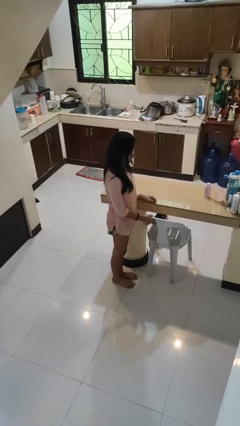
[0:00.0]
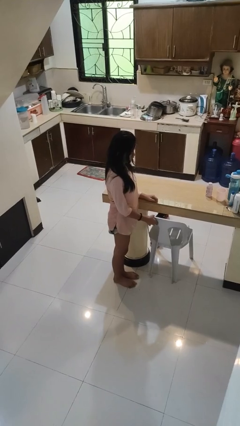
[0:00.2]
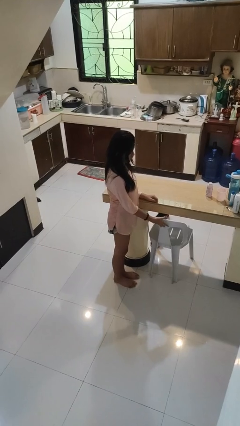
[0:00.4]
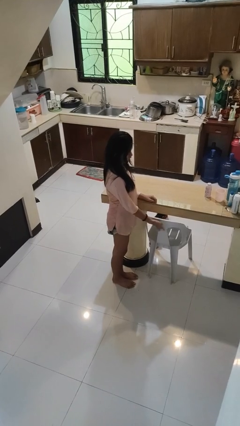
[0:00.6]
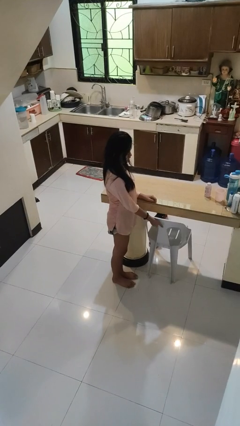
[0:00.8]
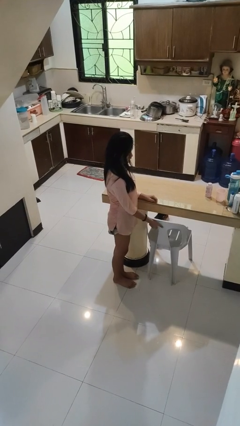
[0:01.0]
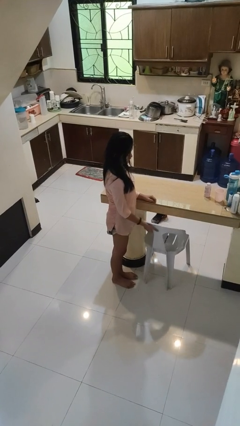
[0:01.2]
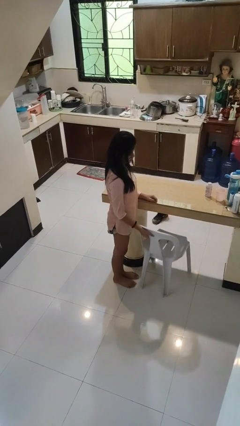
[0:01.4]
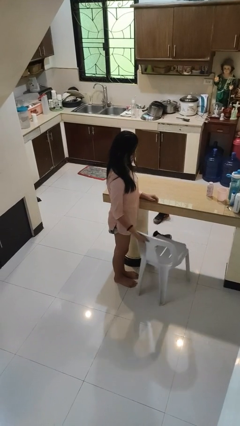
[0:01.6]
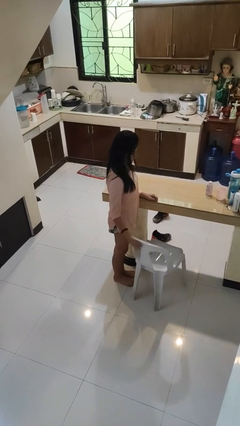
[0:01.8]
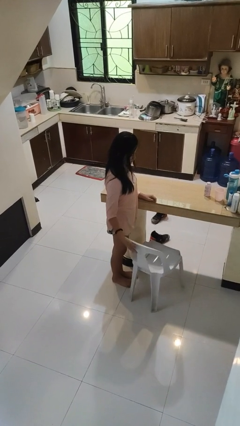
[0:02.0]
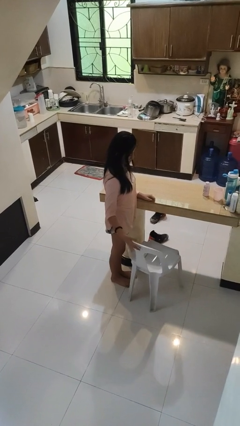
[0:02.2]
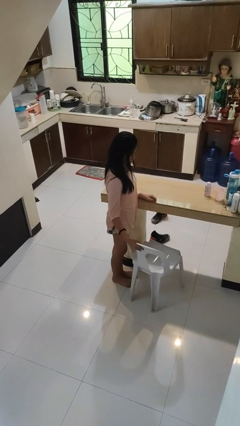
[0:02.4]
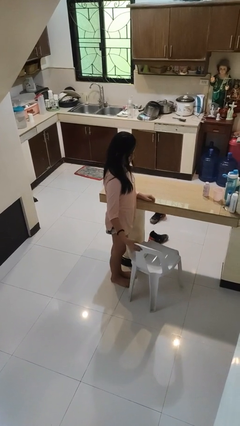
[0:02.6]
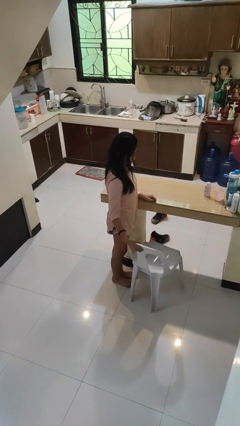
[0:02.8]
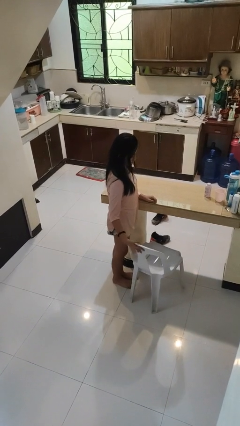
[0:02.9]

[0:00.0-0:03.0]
person pulls out chair

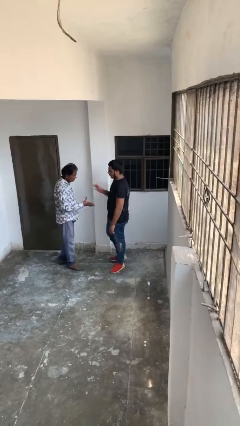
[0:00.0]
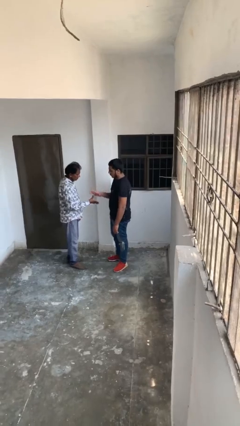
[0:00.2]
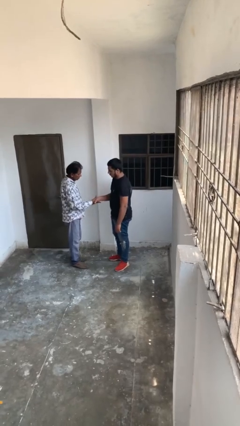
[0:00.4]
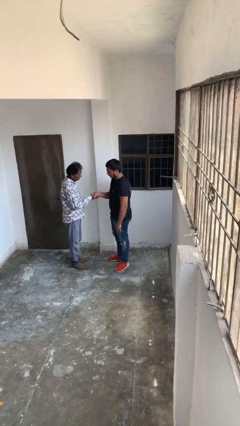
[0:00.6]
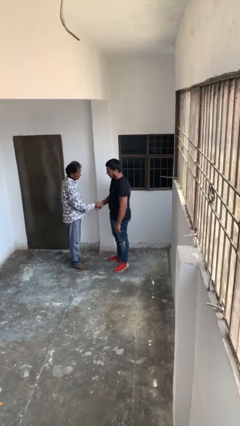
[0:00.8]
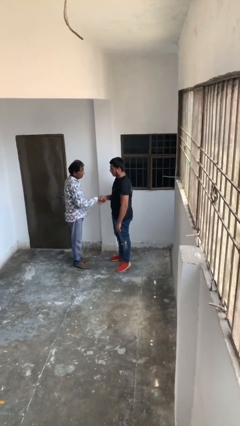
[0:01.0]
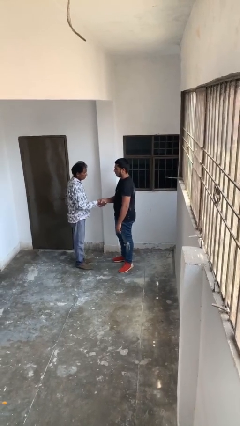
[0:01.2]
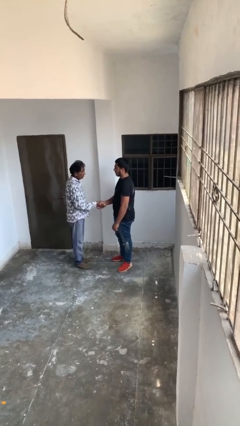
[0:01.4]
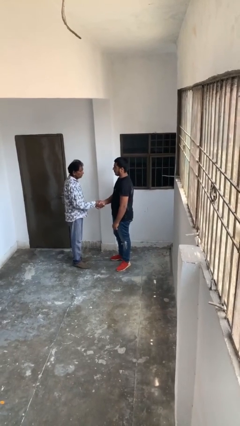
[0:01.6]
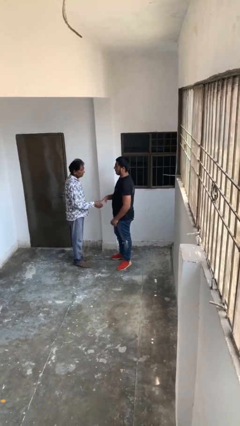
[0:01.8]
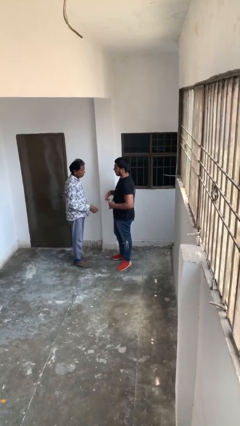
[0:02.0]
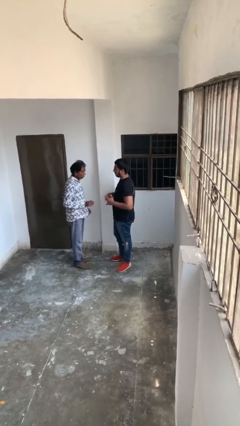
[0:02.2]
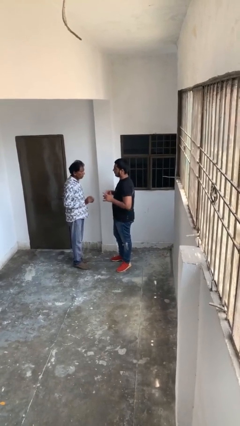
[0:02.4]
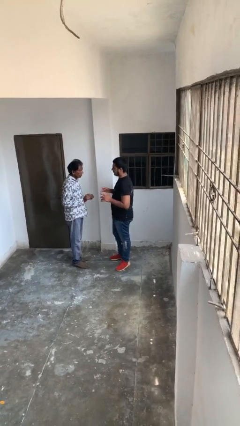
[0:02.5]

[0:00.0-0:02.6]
person shakes hand

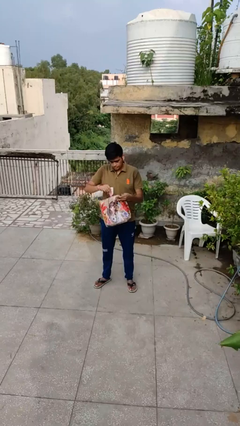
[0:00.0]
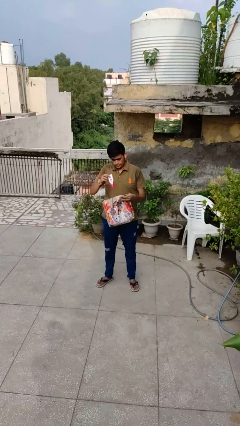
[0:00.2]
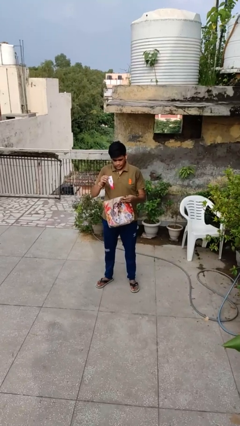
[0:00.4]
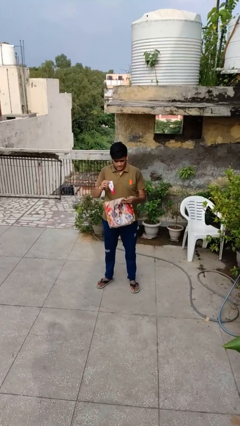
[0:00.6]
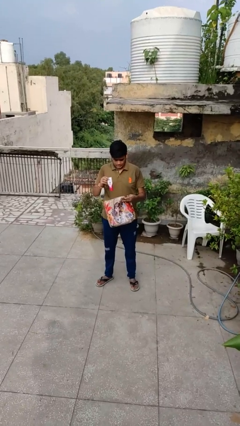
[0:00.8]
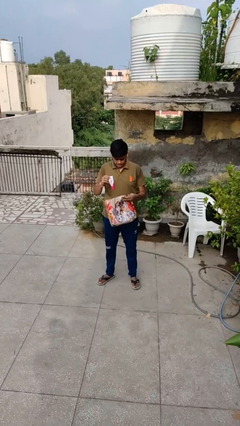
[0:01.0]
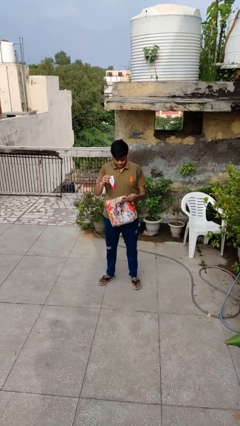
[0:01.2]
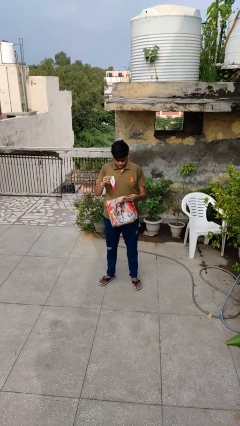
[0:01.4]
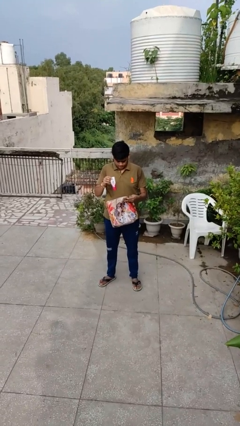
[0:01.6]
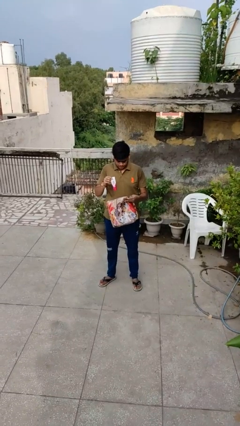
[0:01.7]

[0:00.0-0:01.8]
person takes object from purse

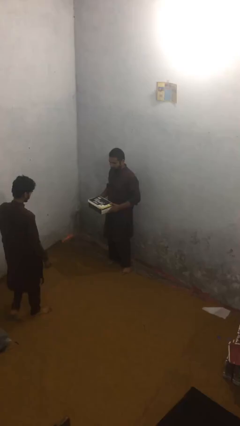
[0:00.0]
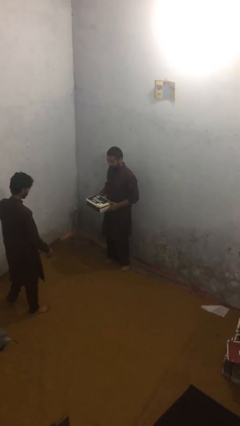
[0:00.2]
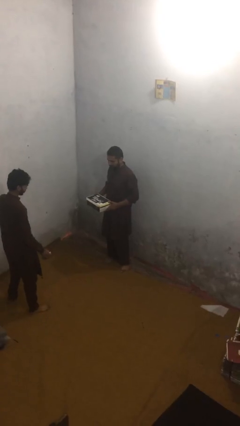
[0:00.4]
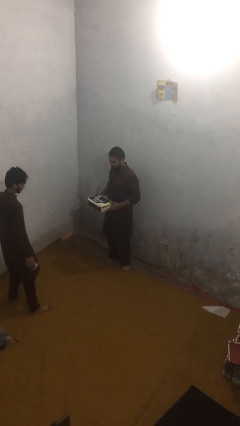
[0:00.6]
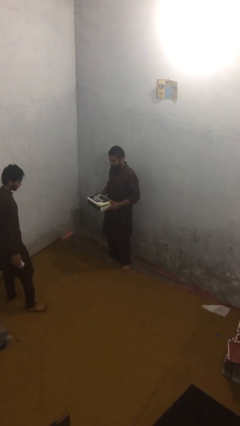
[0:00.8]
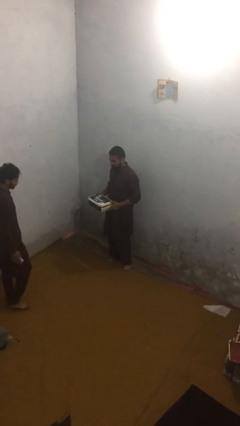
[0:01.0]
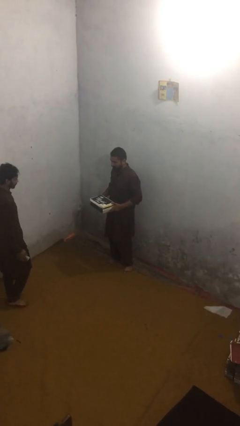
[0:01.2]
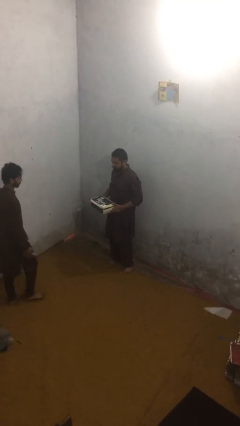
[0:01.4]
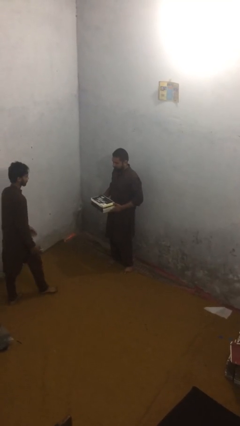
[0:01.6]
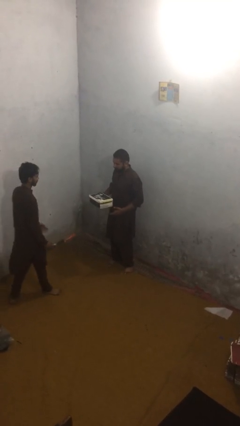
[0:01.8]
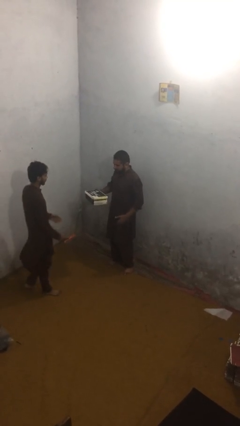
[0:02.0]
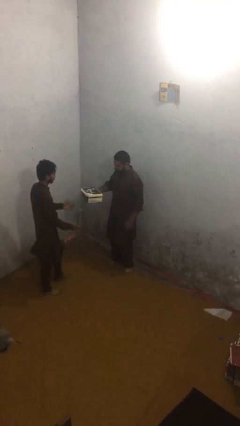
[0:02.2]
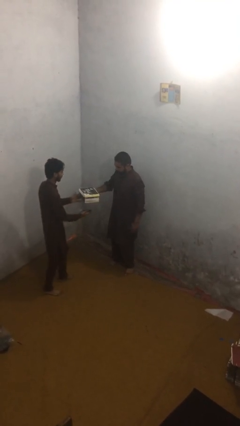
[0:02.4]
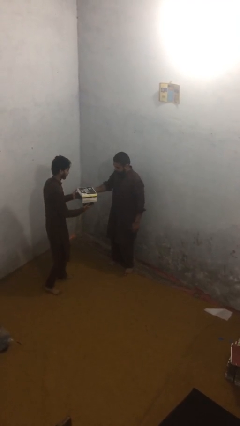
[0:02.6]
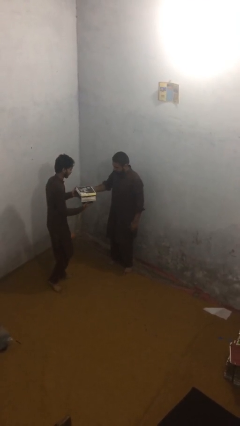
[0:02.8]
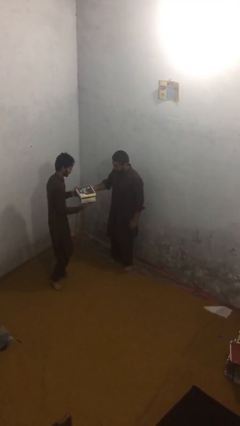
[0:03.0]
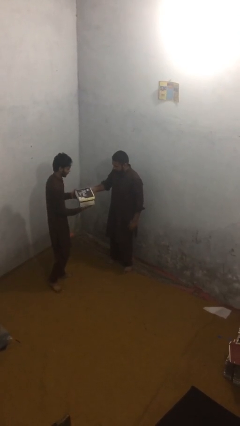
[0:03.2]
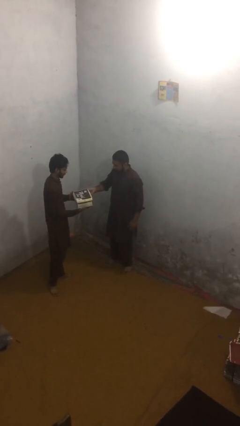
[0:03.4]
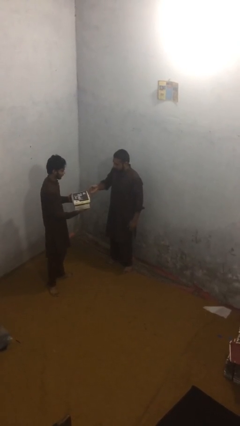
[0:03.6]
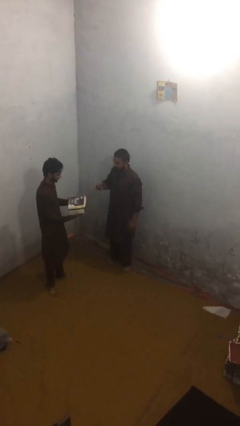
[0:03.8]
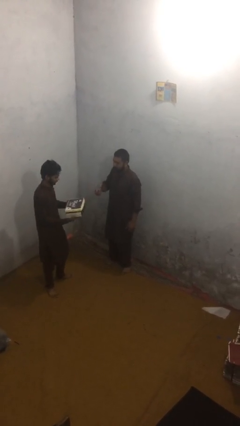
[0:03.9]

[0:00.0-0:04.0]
person transfers object to person

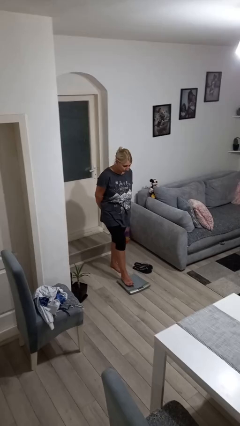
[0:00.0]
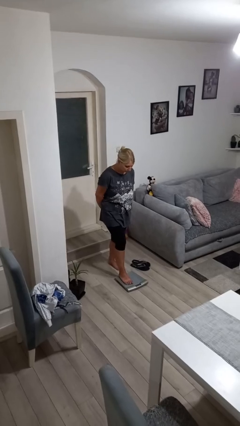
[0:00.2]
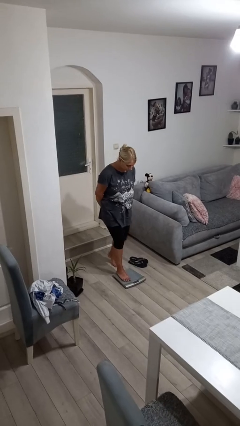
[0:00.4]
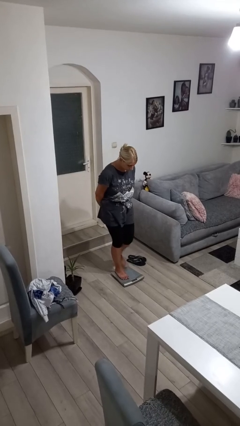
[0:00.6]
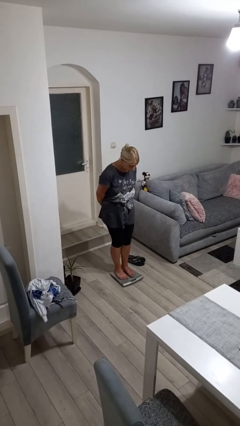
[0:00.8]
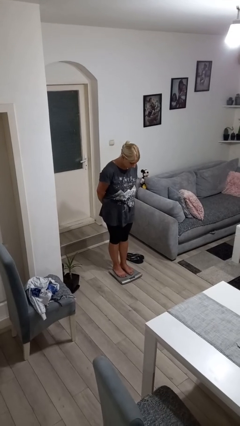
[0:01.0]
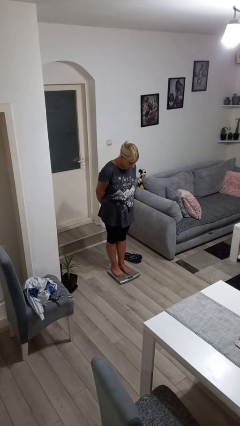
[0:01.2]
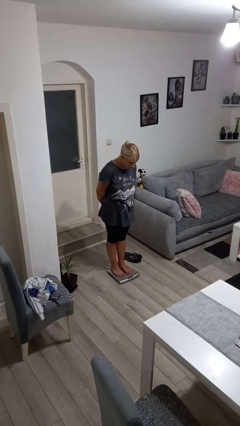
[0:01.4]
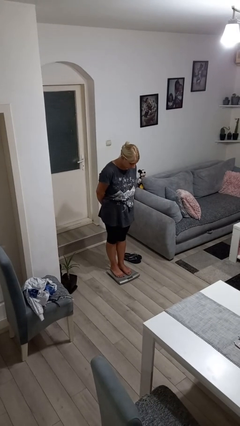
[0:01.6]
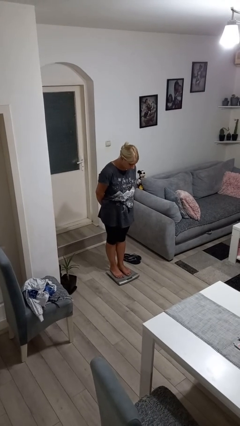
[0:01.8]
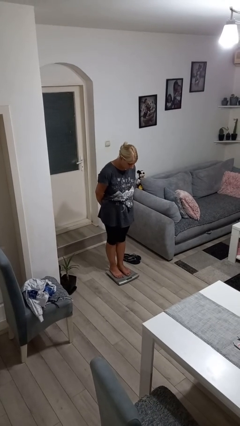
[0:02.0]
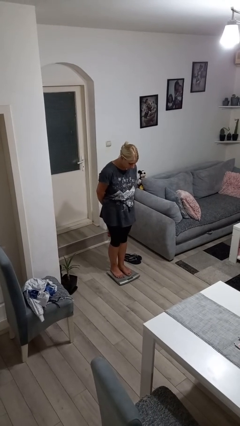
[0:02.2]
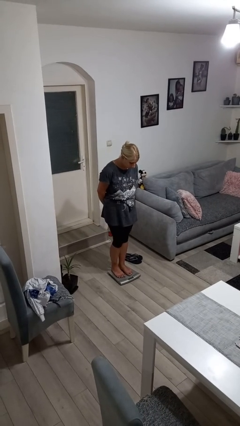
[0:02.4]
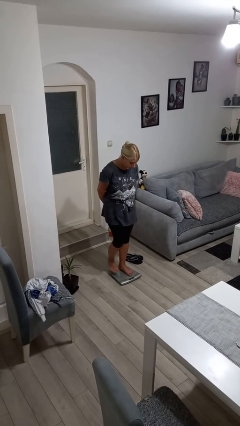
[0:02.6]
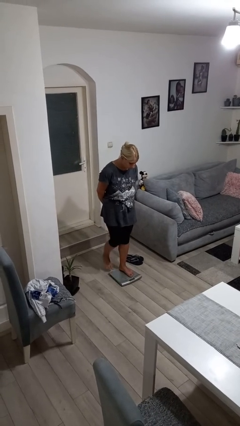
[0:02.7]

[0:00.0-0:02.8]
person uses bodyweight scale

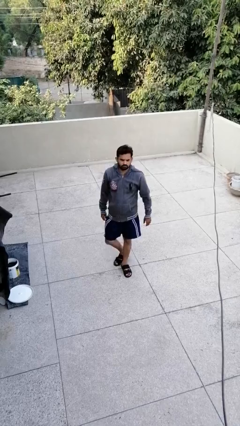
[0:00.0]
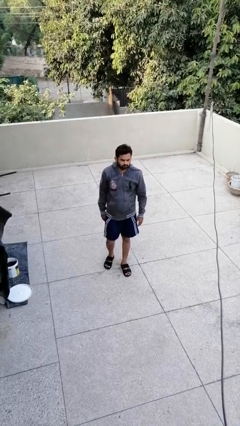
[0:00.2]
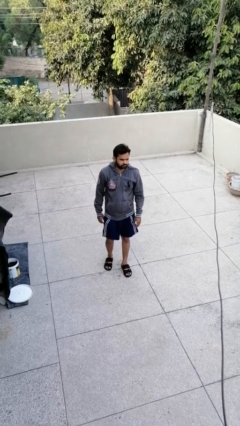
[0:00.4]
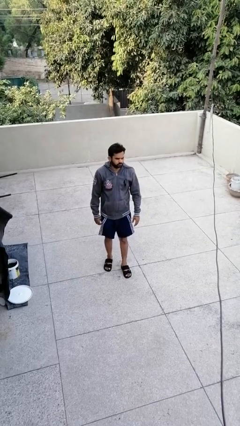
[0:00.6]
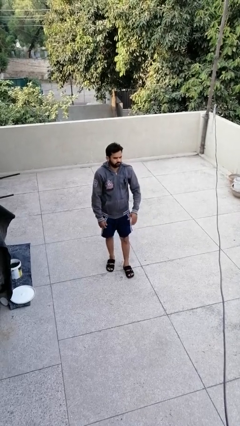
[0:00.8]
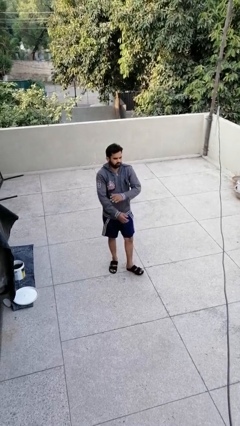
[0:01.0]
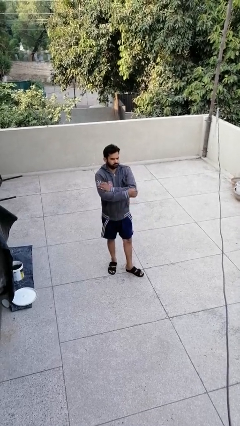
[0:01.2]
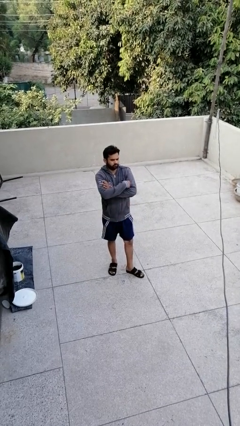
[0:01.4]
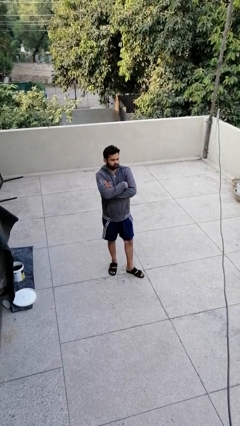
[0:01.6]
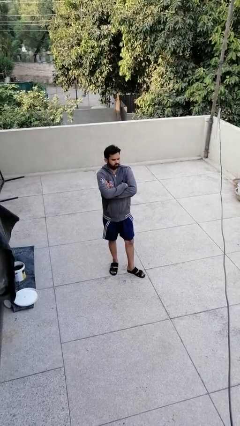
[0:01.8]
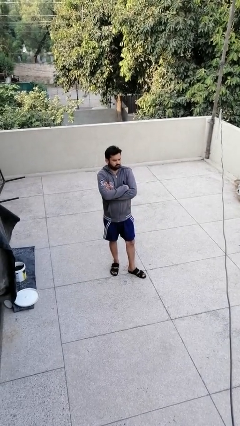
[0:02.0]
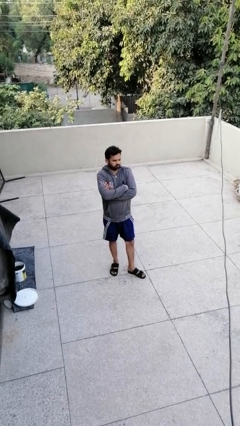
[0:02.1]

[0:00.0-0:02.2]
person crosses arms

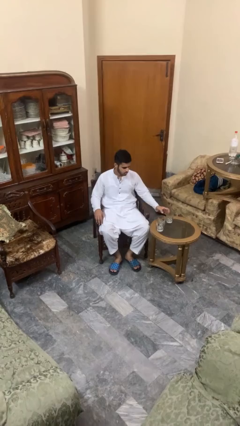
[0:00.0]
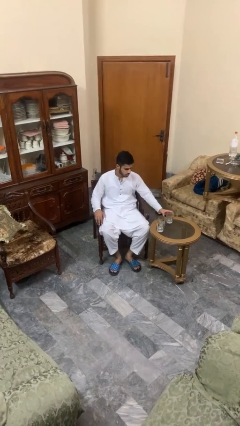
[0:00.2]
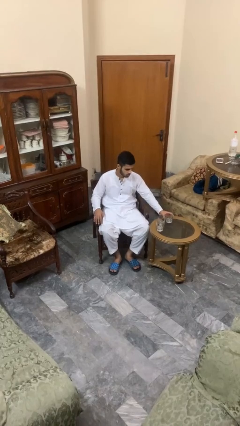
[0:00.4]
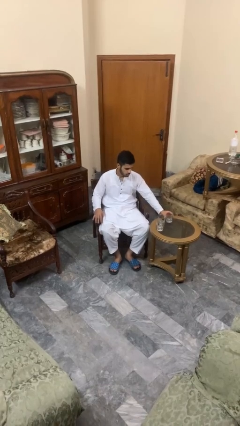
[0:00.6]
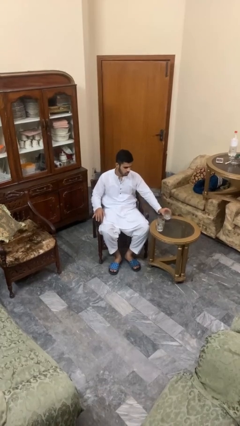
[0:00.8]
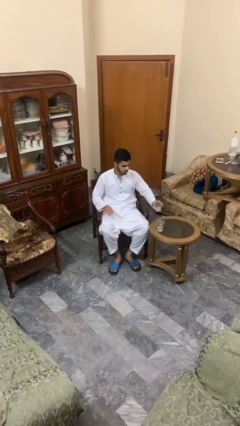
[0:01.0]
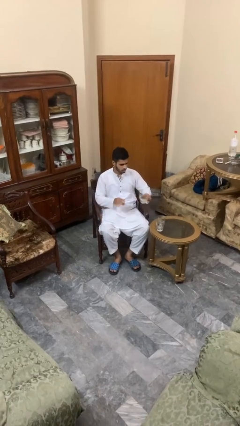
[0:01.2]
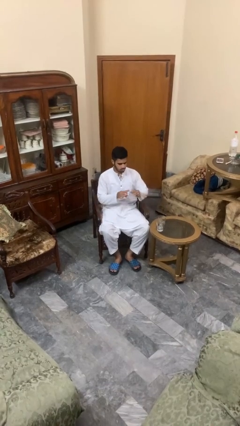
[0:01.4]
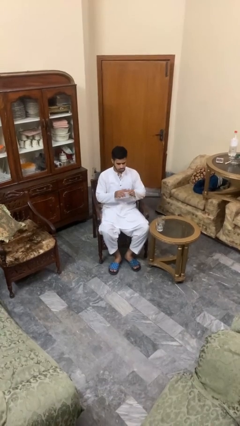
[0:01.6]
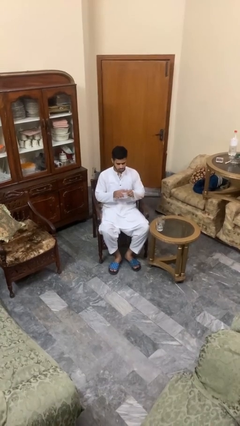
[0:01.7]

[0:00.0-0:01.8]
person picks up object from table
